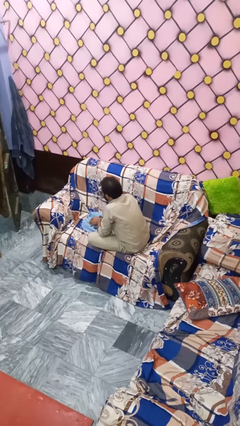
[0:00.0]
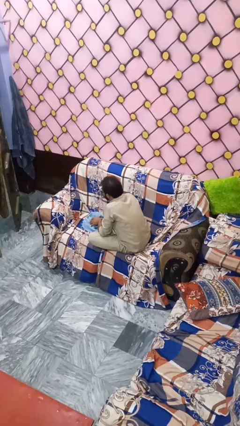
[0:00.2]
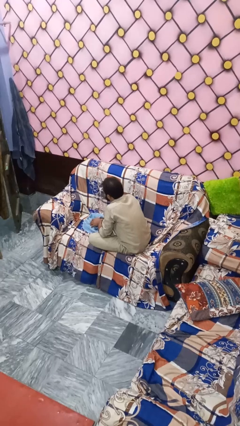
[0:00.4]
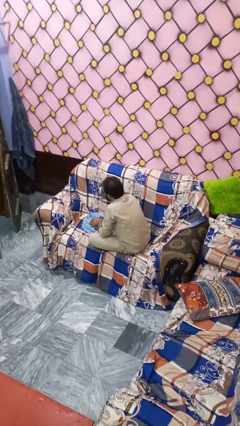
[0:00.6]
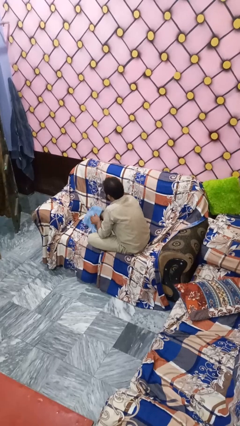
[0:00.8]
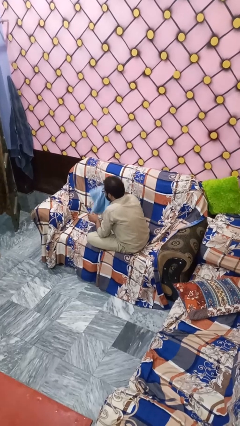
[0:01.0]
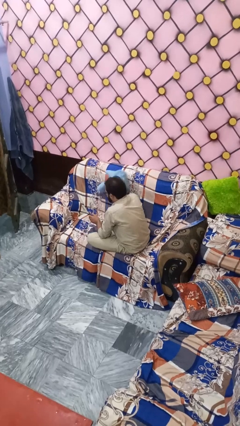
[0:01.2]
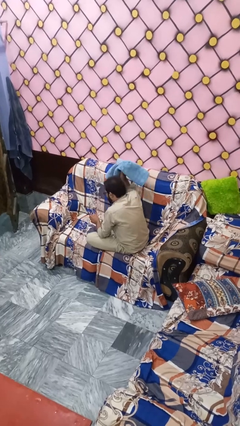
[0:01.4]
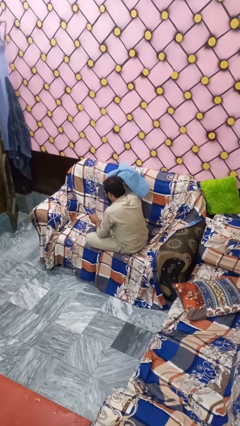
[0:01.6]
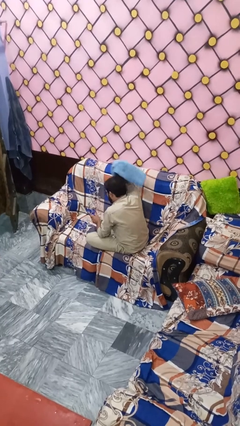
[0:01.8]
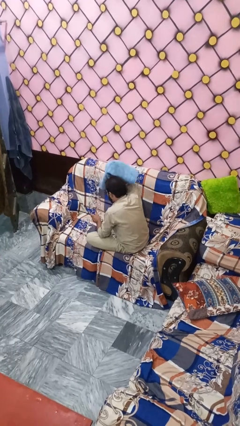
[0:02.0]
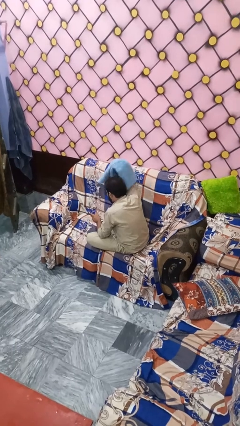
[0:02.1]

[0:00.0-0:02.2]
person dries hair with towel

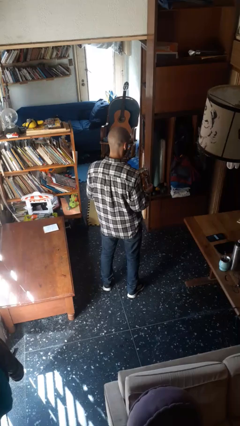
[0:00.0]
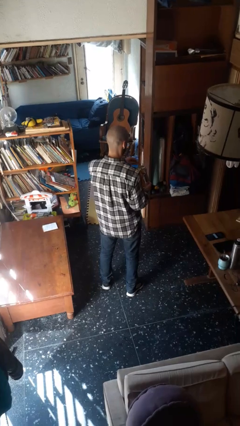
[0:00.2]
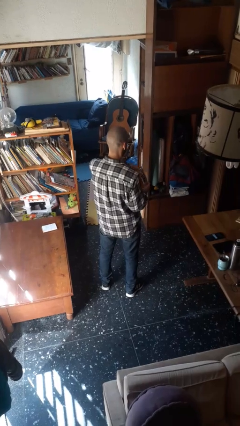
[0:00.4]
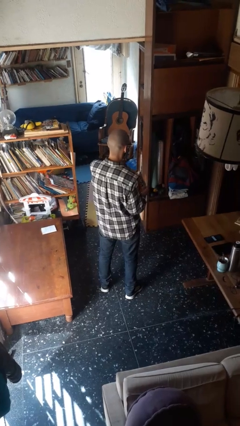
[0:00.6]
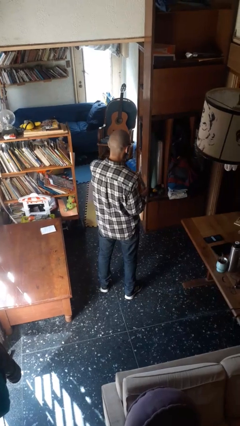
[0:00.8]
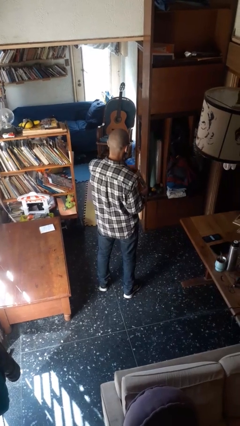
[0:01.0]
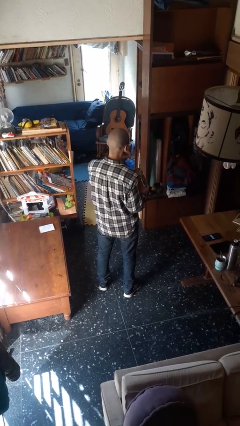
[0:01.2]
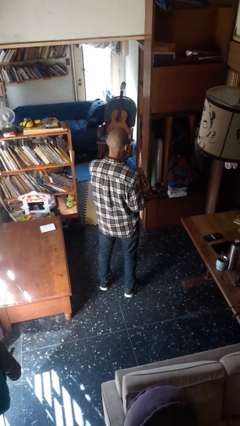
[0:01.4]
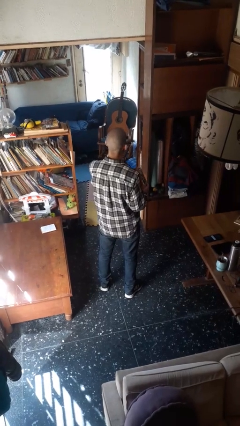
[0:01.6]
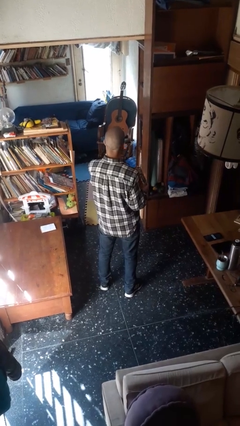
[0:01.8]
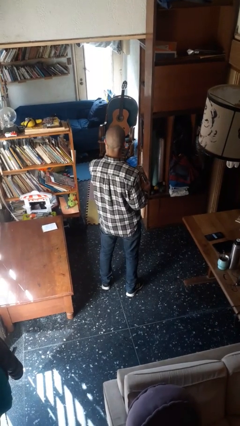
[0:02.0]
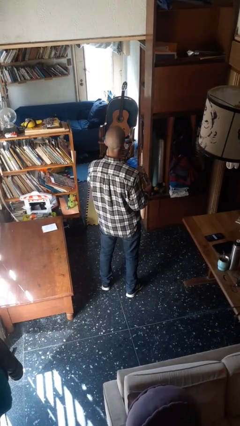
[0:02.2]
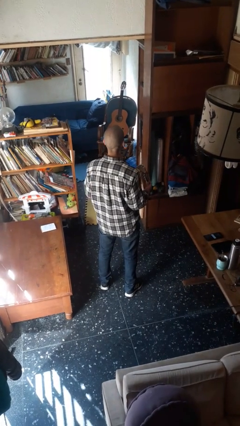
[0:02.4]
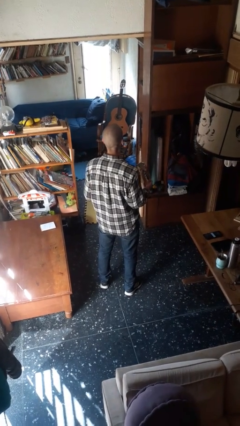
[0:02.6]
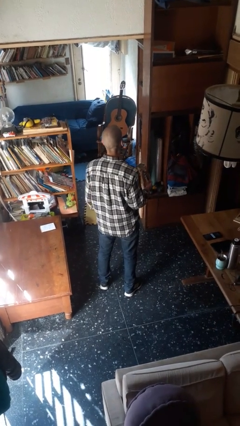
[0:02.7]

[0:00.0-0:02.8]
person eats snack from bag

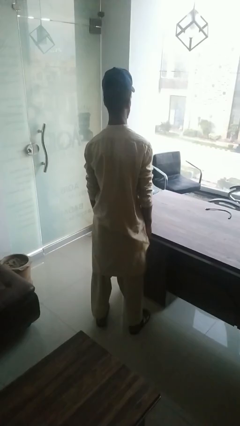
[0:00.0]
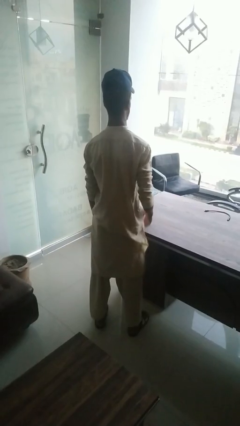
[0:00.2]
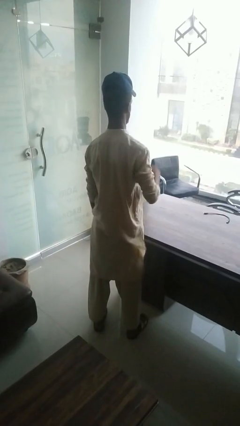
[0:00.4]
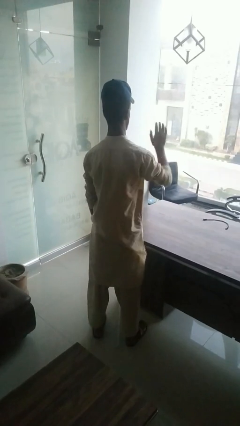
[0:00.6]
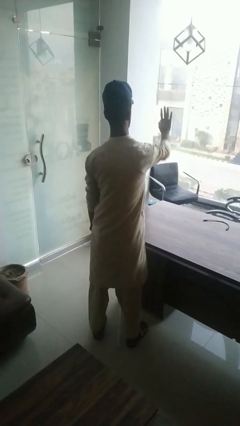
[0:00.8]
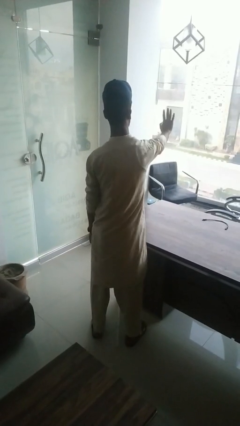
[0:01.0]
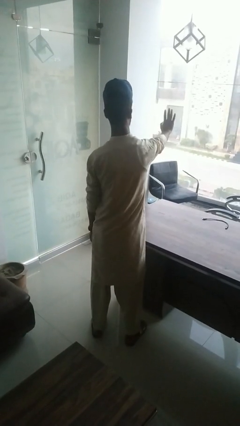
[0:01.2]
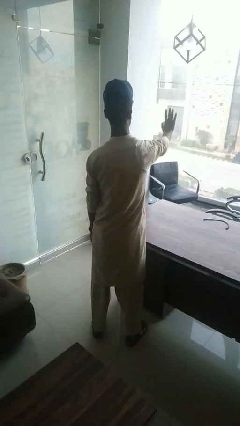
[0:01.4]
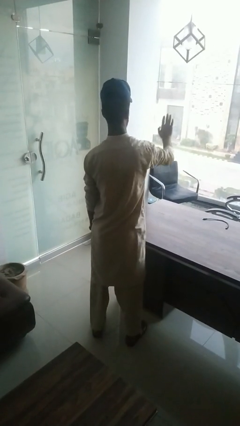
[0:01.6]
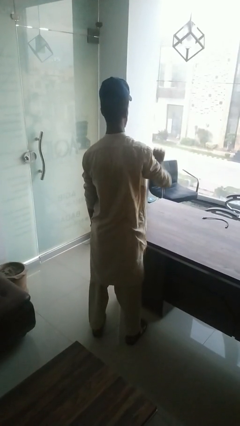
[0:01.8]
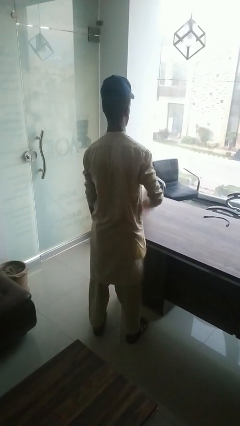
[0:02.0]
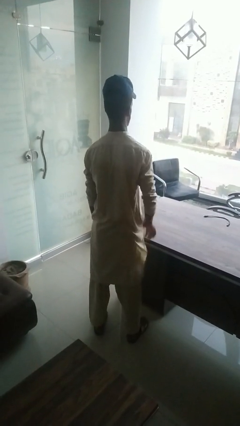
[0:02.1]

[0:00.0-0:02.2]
person gestures stop

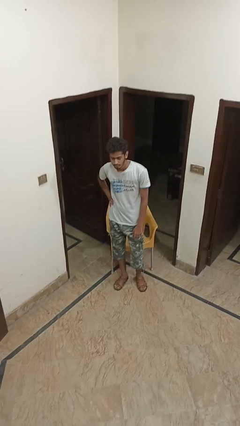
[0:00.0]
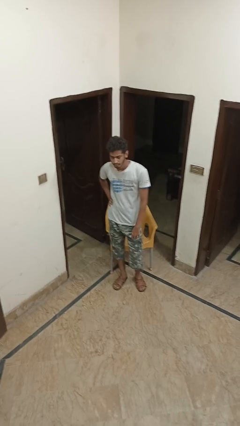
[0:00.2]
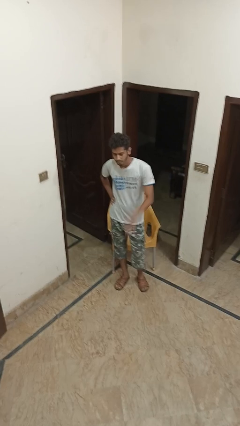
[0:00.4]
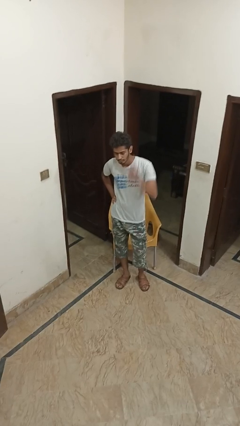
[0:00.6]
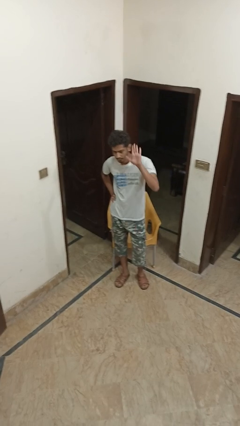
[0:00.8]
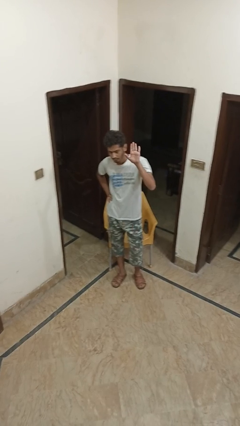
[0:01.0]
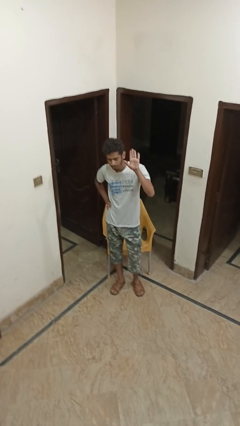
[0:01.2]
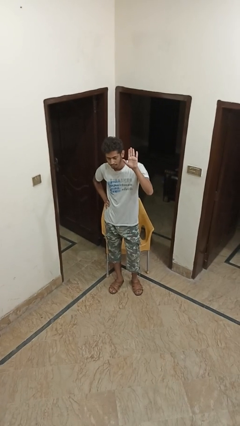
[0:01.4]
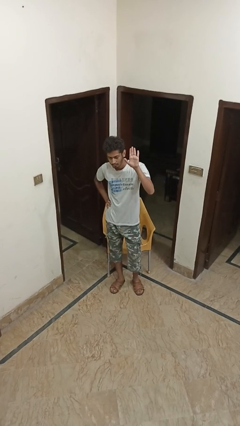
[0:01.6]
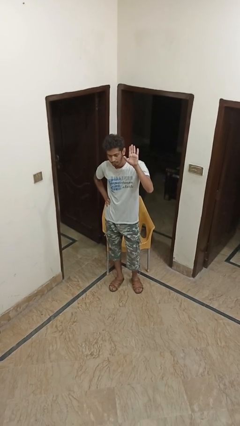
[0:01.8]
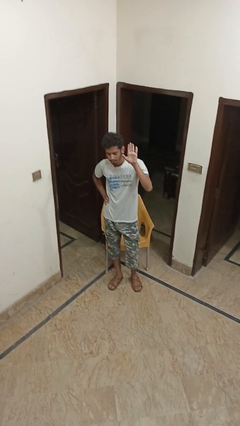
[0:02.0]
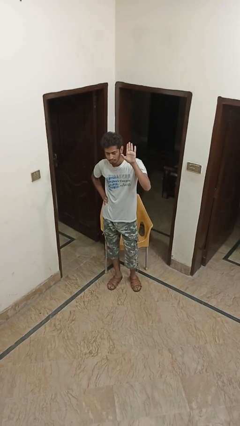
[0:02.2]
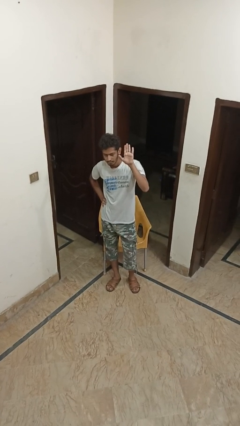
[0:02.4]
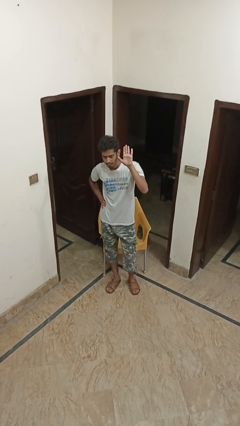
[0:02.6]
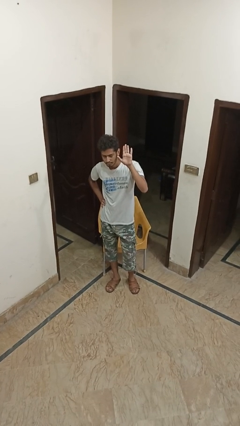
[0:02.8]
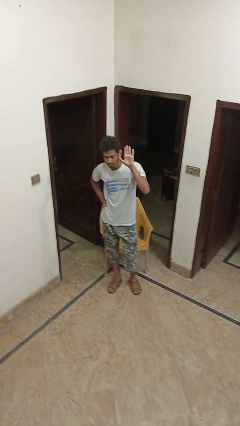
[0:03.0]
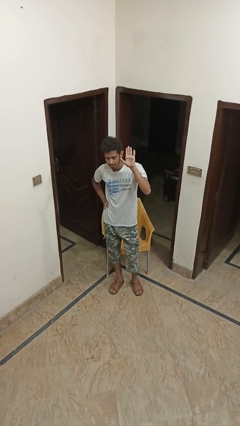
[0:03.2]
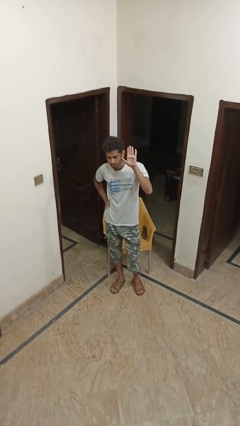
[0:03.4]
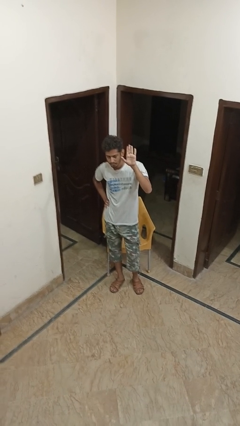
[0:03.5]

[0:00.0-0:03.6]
person gestures raise hand

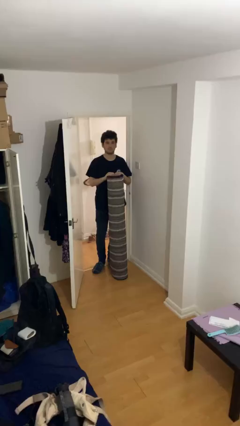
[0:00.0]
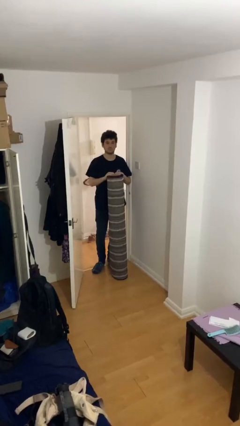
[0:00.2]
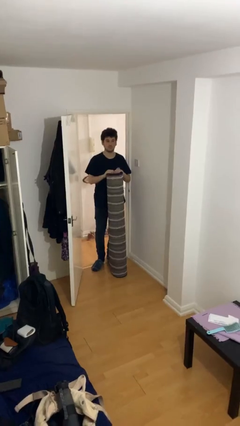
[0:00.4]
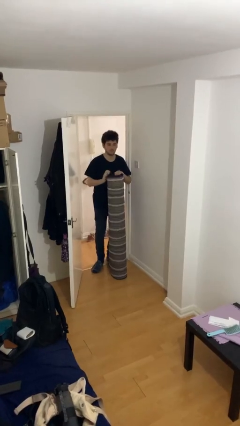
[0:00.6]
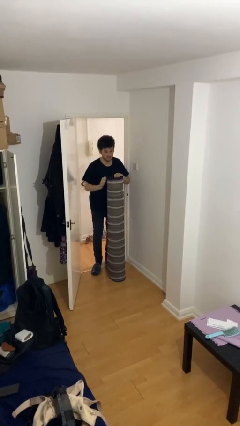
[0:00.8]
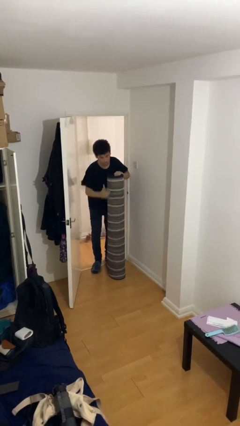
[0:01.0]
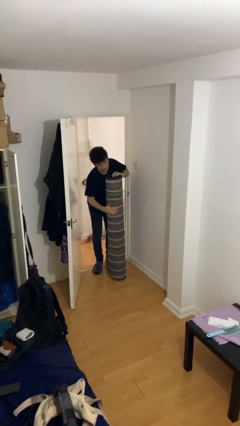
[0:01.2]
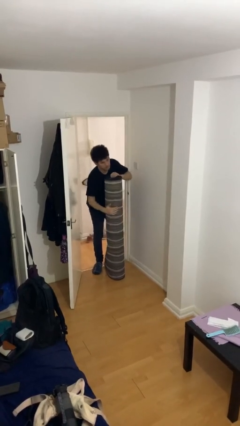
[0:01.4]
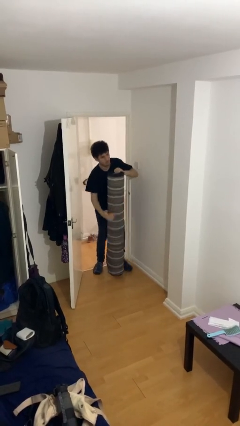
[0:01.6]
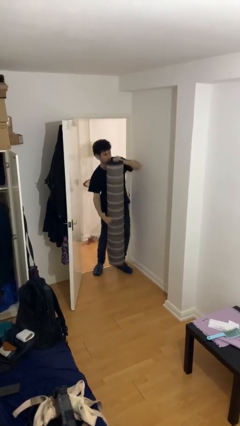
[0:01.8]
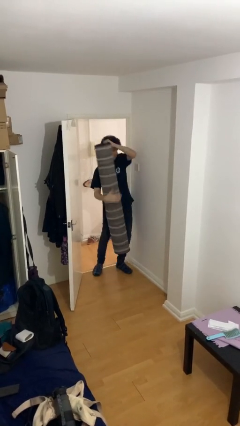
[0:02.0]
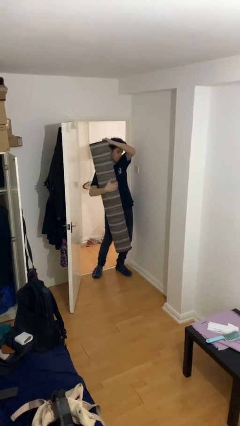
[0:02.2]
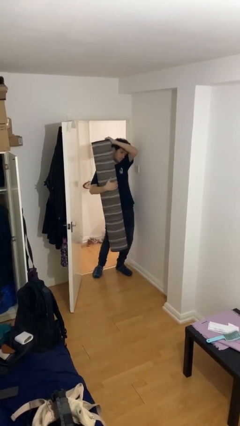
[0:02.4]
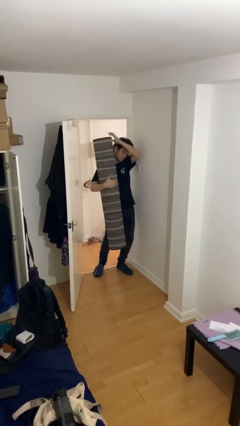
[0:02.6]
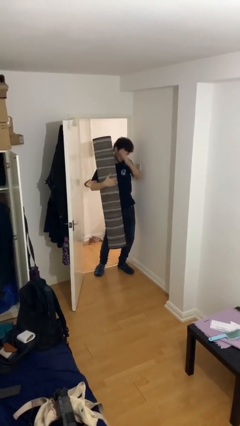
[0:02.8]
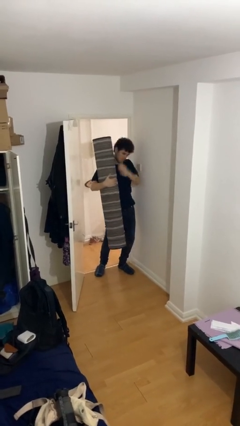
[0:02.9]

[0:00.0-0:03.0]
person picks up object from floor

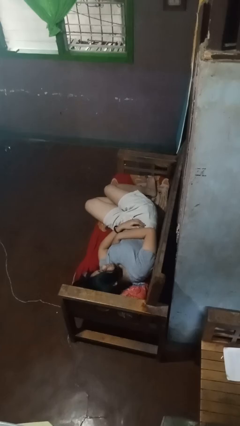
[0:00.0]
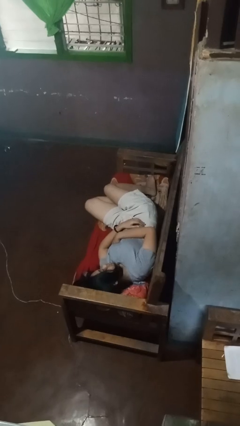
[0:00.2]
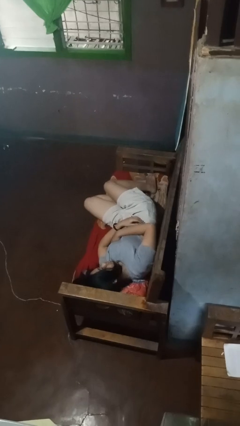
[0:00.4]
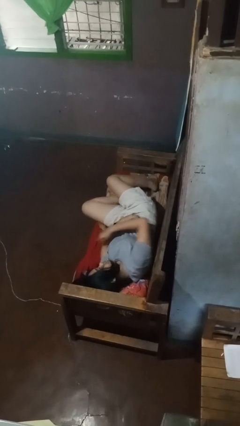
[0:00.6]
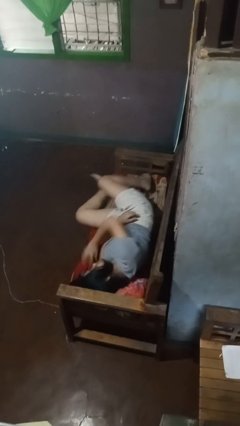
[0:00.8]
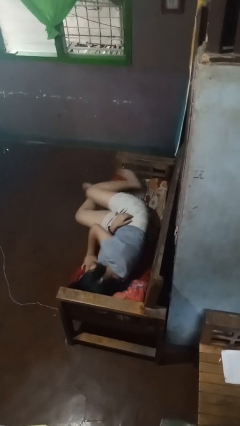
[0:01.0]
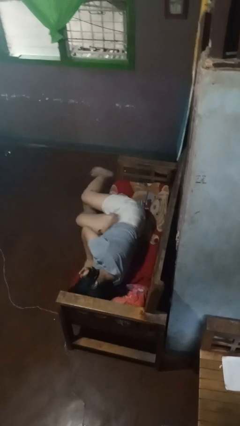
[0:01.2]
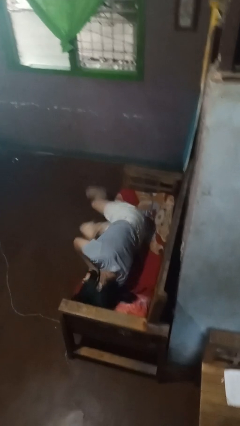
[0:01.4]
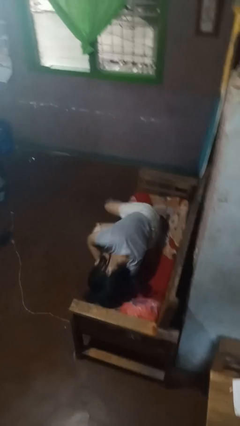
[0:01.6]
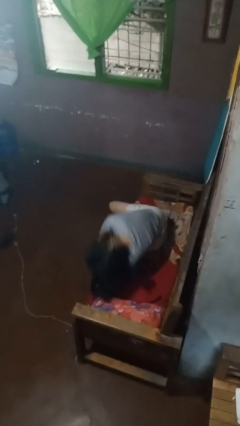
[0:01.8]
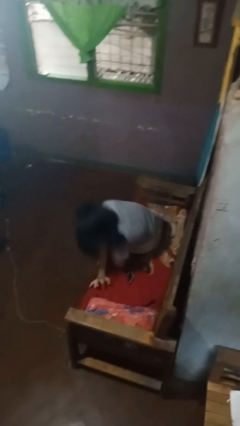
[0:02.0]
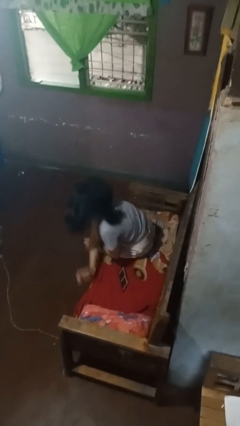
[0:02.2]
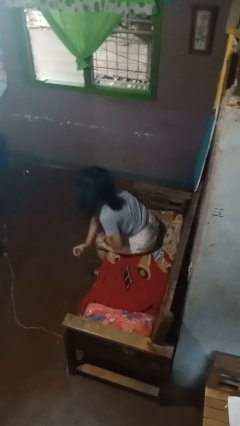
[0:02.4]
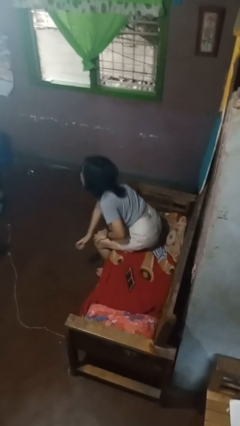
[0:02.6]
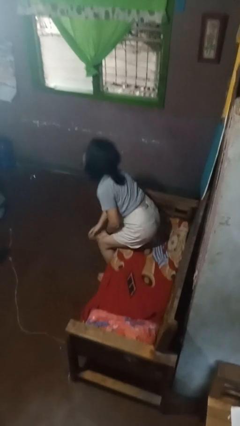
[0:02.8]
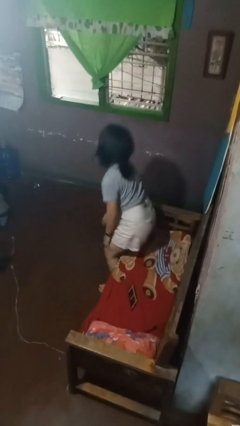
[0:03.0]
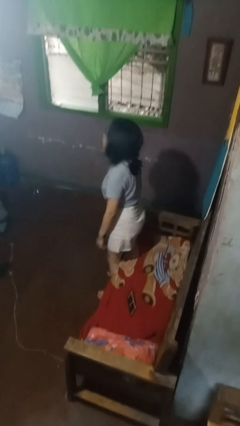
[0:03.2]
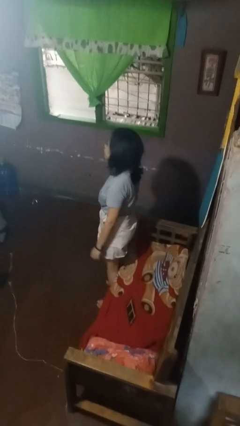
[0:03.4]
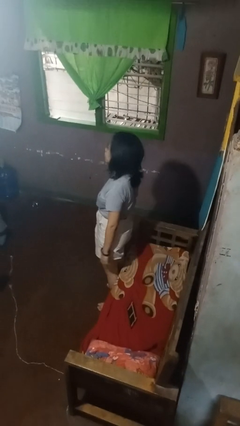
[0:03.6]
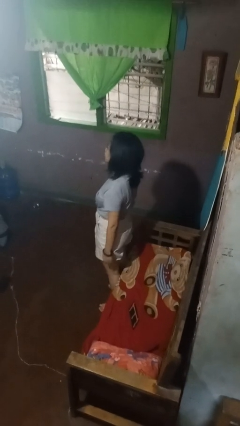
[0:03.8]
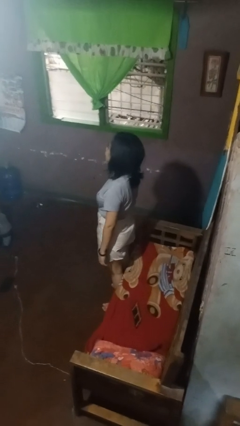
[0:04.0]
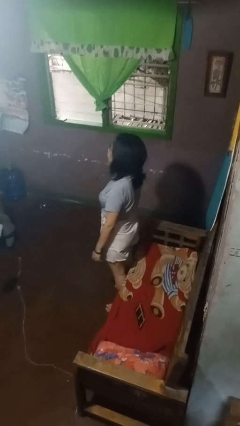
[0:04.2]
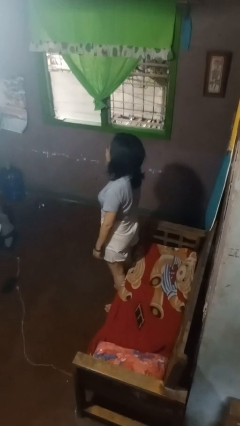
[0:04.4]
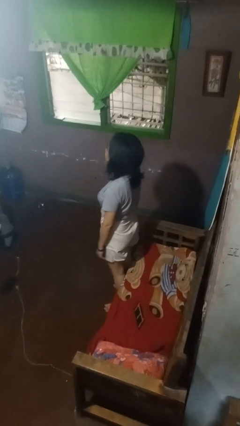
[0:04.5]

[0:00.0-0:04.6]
person stands up
